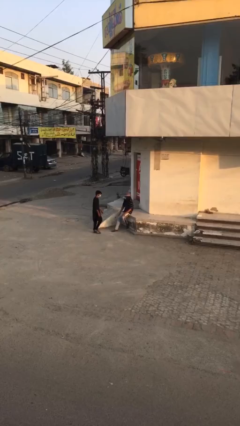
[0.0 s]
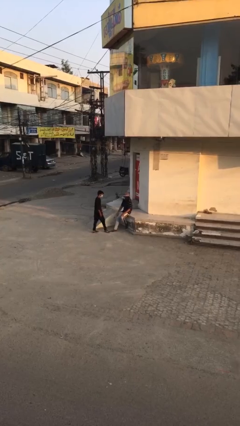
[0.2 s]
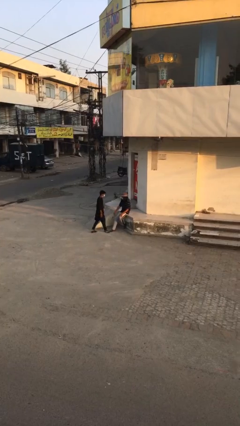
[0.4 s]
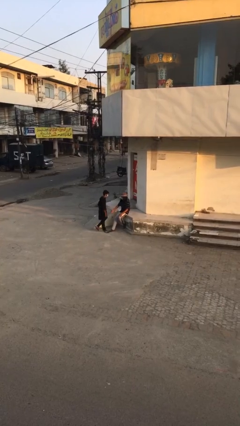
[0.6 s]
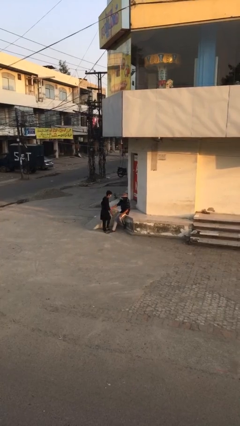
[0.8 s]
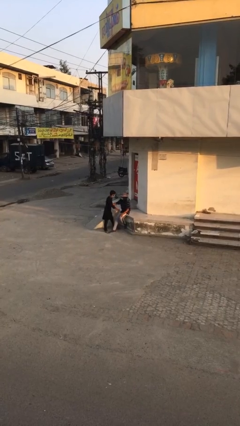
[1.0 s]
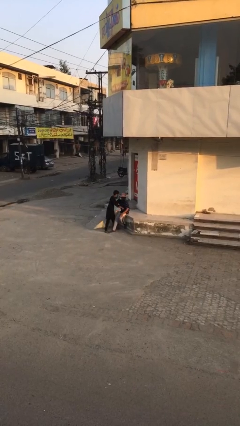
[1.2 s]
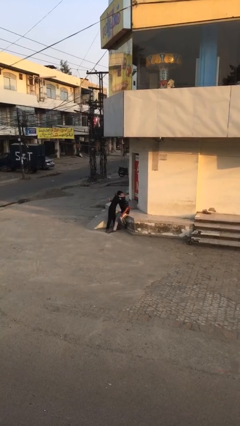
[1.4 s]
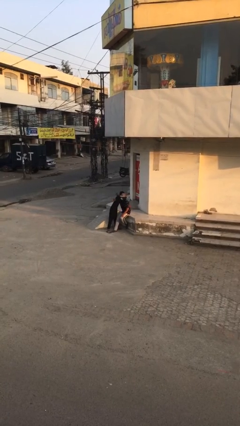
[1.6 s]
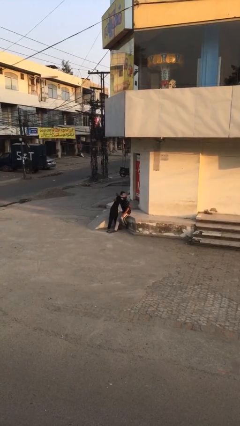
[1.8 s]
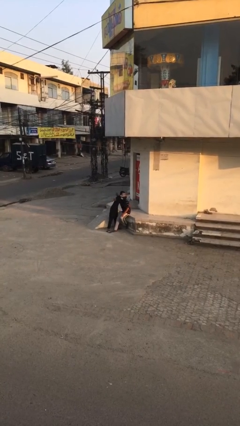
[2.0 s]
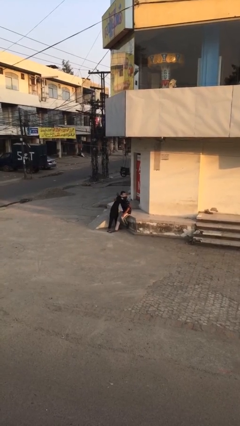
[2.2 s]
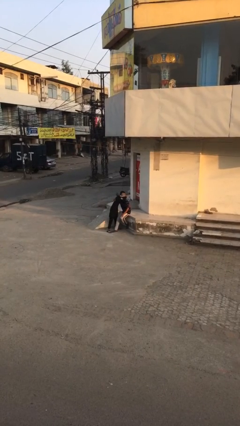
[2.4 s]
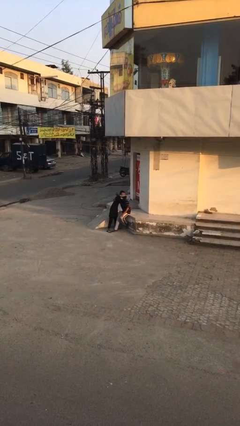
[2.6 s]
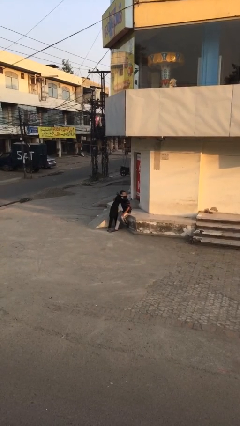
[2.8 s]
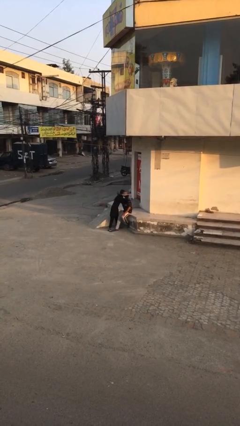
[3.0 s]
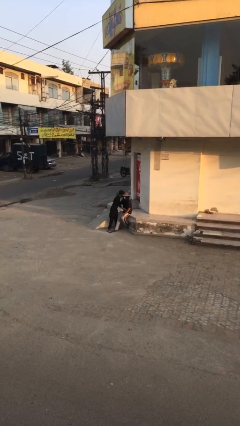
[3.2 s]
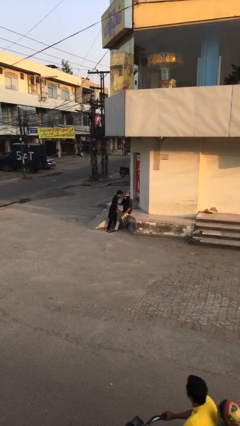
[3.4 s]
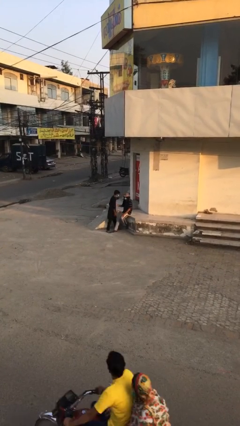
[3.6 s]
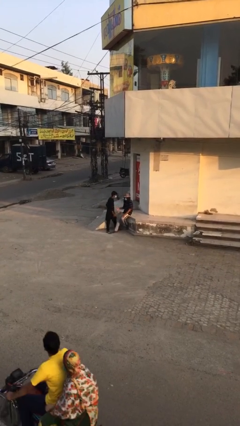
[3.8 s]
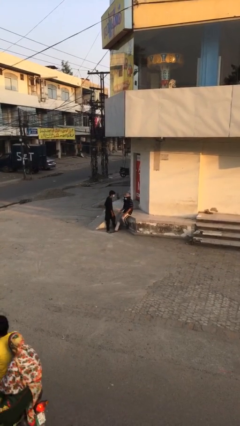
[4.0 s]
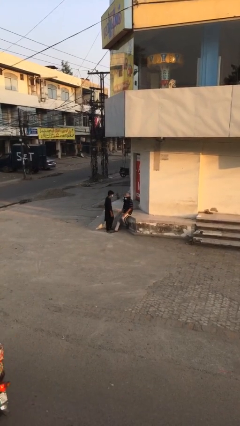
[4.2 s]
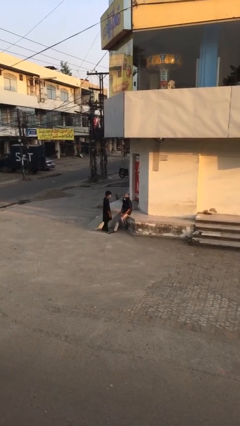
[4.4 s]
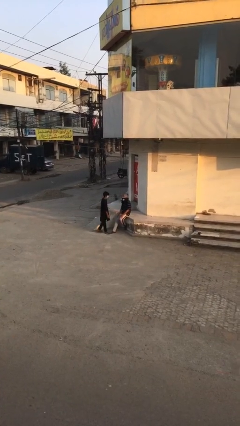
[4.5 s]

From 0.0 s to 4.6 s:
person embraces person

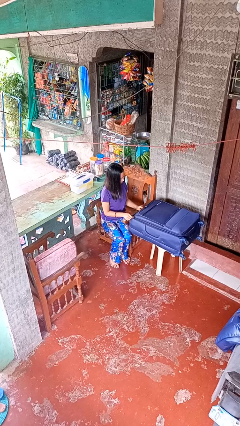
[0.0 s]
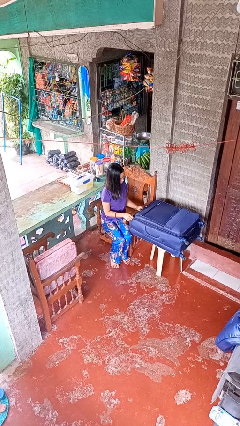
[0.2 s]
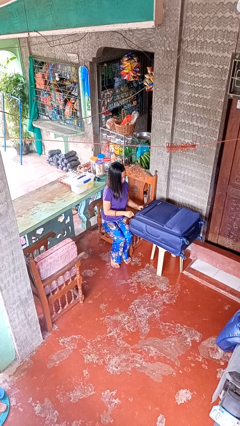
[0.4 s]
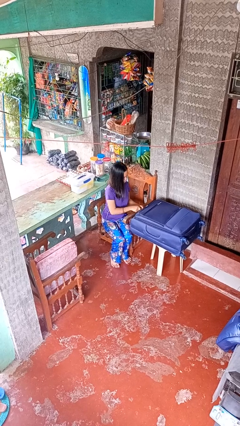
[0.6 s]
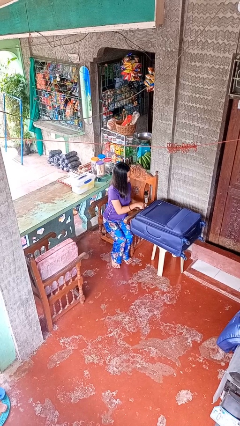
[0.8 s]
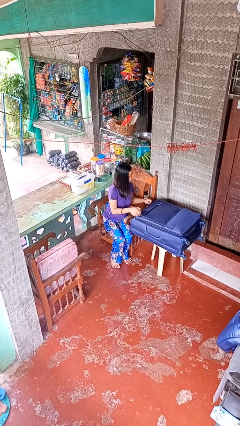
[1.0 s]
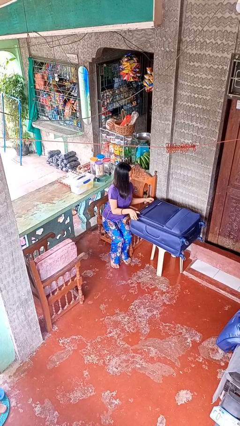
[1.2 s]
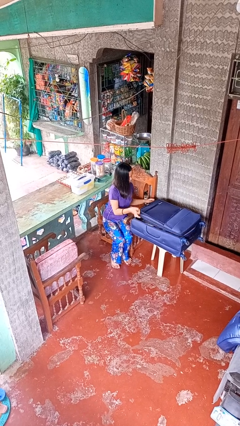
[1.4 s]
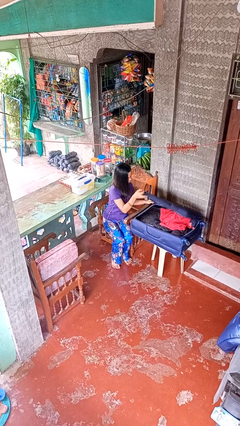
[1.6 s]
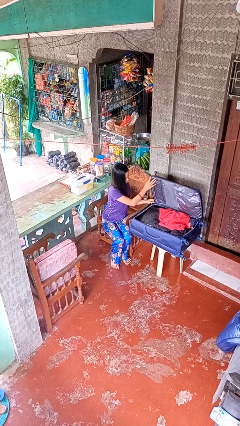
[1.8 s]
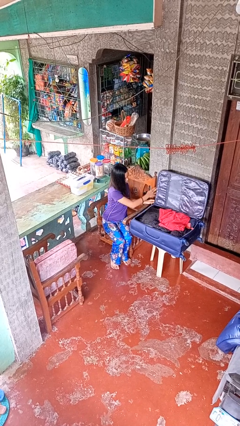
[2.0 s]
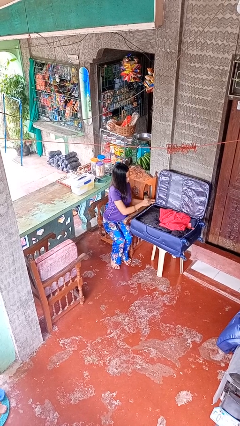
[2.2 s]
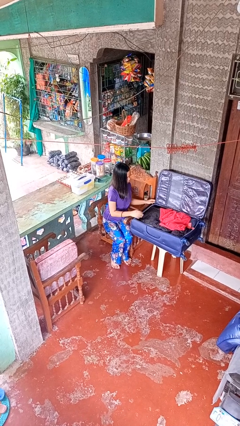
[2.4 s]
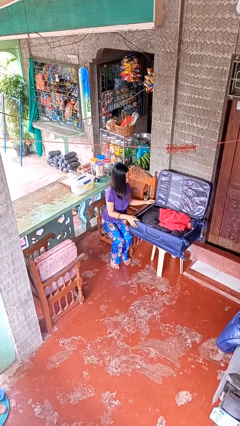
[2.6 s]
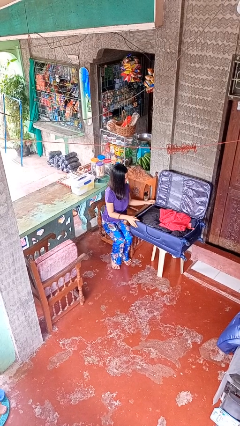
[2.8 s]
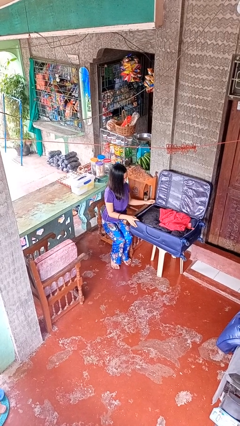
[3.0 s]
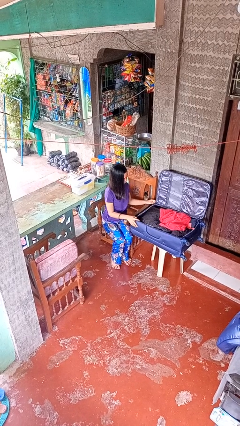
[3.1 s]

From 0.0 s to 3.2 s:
person opens suitcase

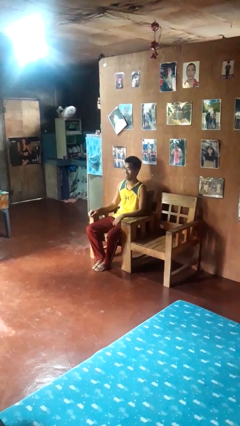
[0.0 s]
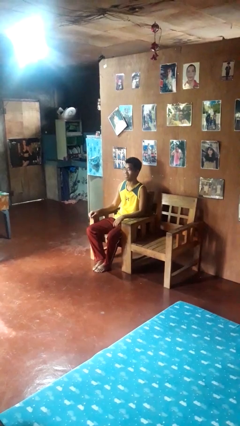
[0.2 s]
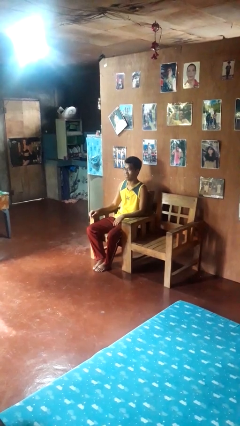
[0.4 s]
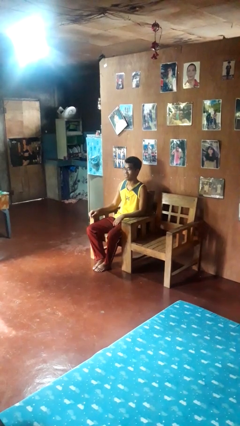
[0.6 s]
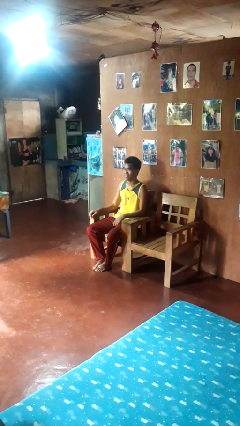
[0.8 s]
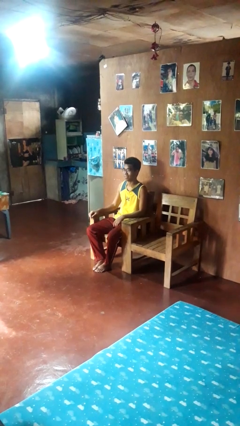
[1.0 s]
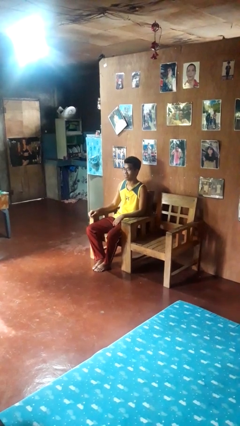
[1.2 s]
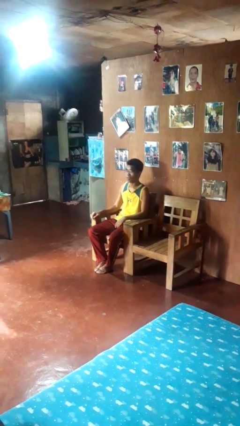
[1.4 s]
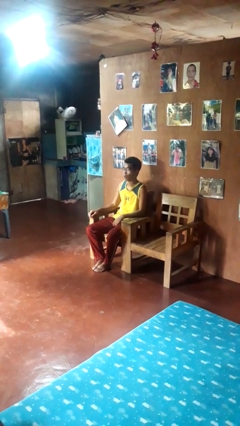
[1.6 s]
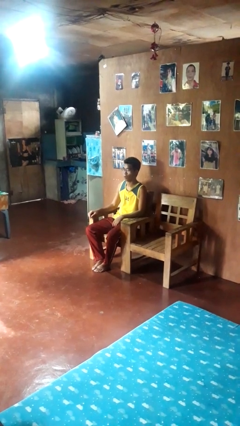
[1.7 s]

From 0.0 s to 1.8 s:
person nods head

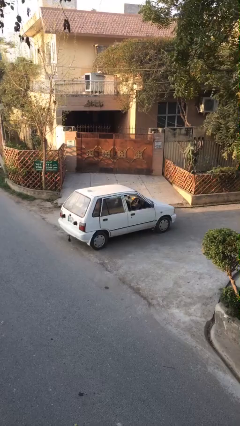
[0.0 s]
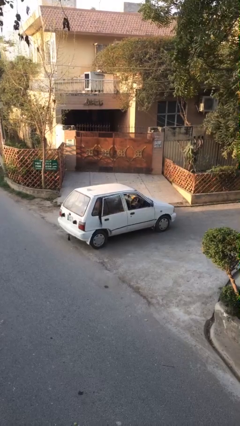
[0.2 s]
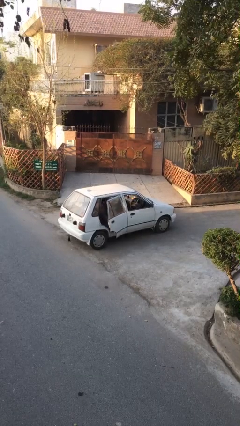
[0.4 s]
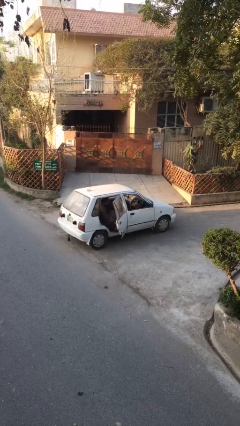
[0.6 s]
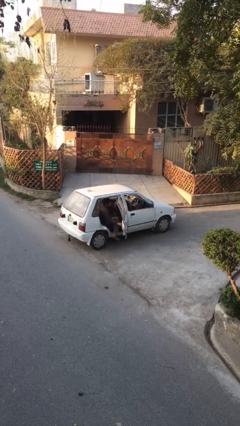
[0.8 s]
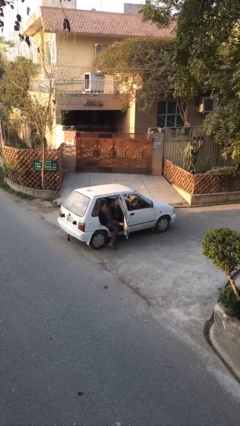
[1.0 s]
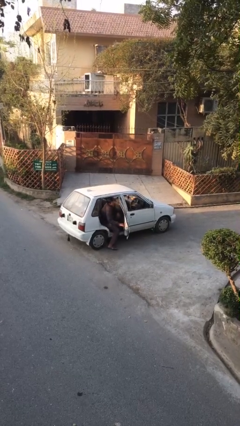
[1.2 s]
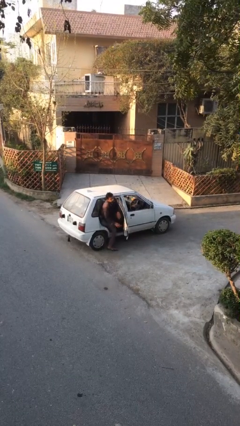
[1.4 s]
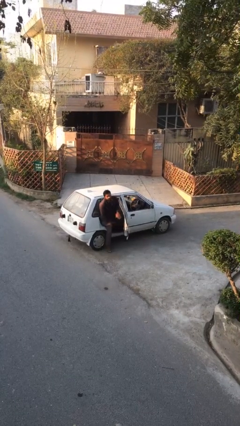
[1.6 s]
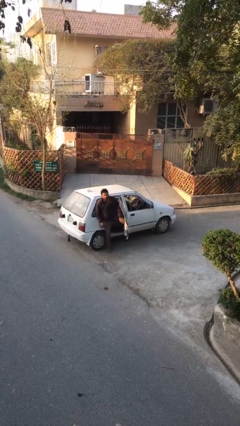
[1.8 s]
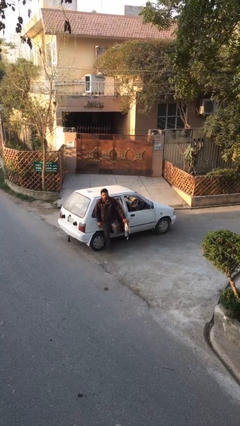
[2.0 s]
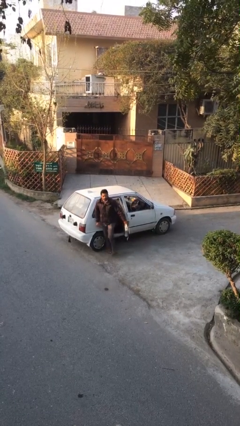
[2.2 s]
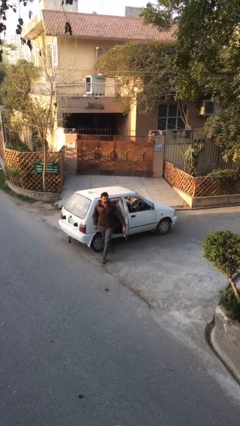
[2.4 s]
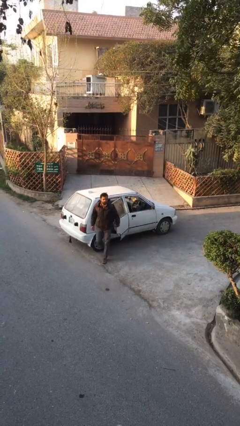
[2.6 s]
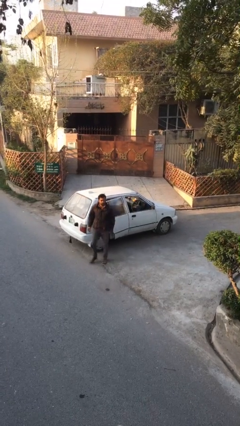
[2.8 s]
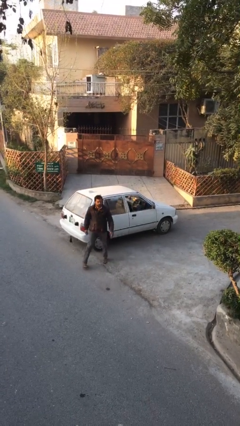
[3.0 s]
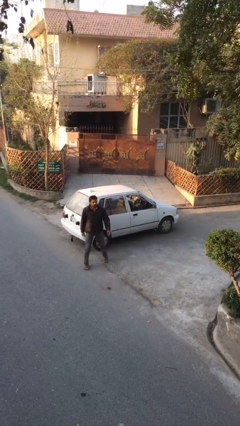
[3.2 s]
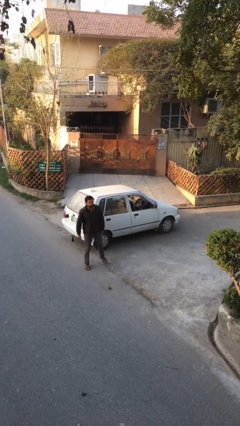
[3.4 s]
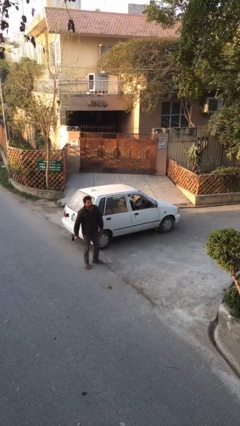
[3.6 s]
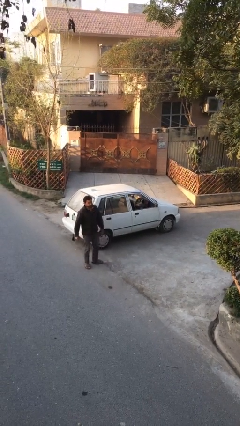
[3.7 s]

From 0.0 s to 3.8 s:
car drops off person

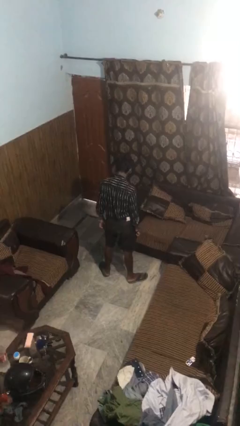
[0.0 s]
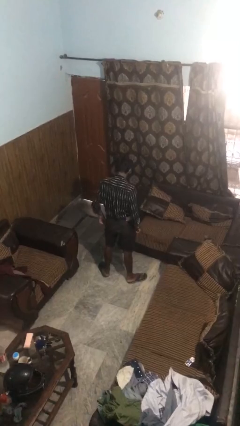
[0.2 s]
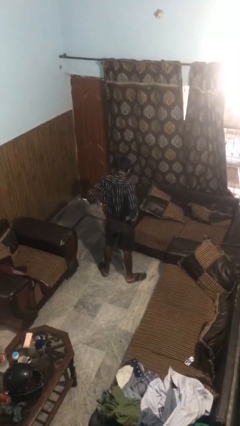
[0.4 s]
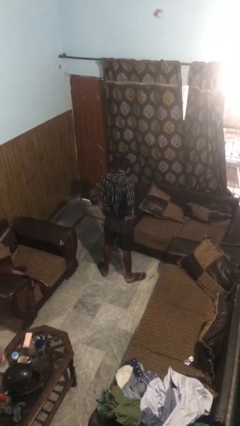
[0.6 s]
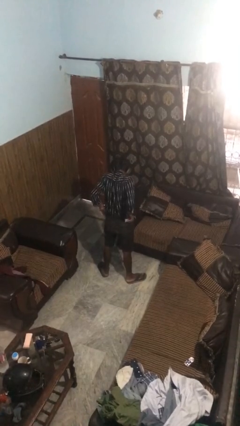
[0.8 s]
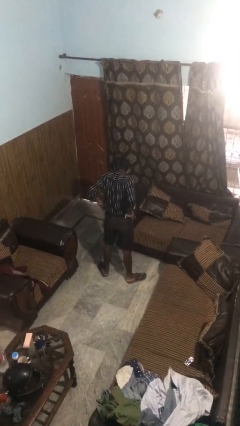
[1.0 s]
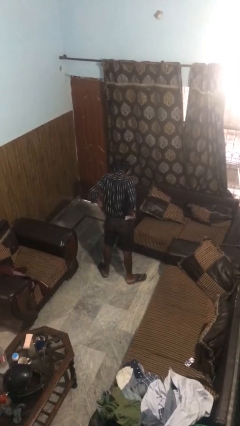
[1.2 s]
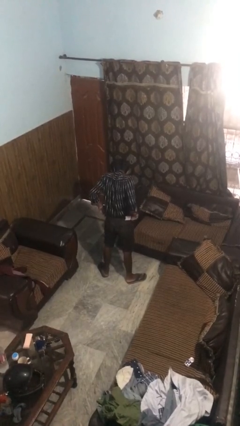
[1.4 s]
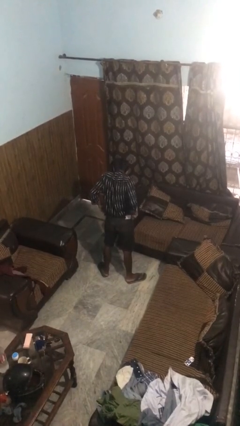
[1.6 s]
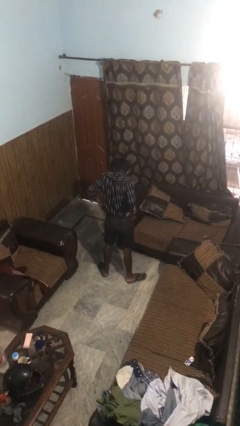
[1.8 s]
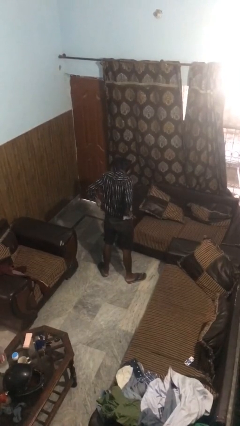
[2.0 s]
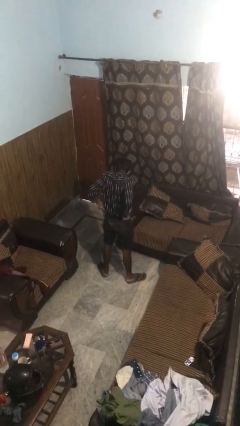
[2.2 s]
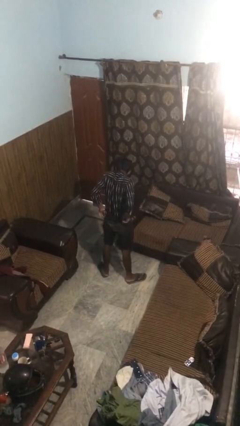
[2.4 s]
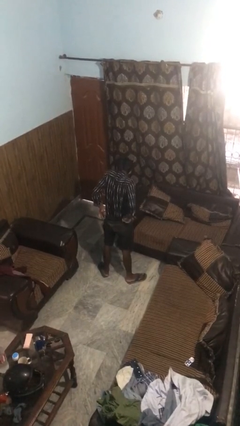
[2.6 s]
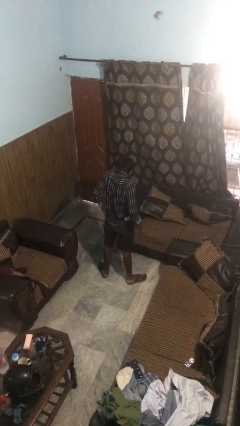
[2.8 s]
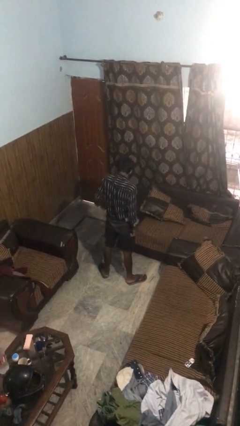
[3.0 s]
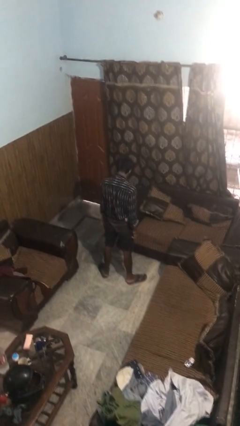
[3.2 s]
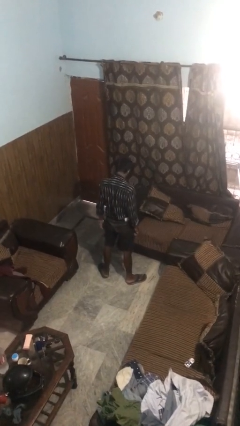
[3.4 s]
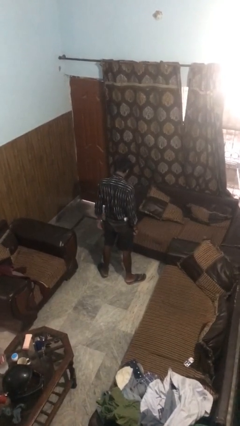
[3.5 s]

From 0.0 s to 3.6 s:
person hikes up pants

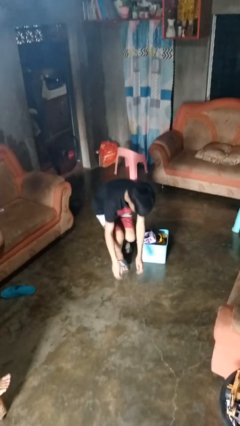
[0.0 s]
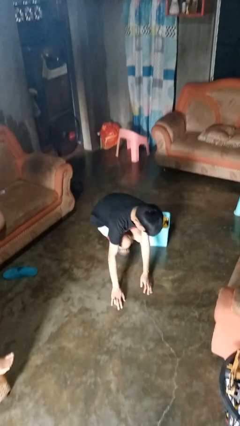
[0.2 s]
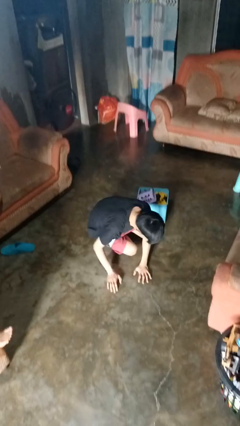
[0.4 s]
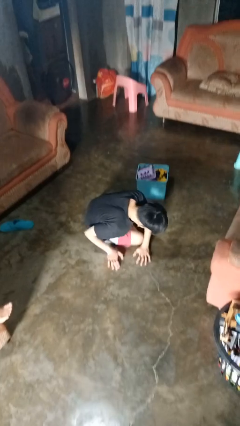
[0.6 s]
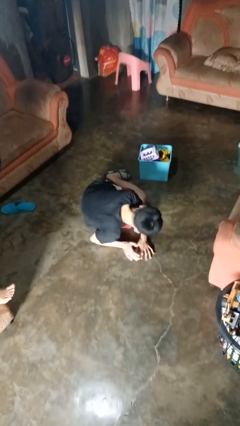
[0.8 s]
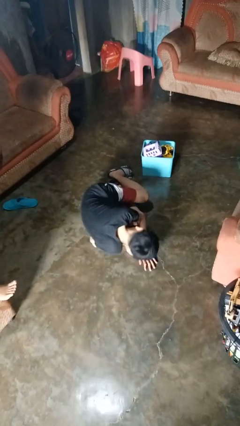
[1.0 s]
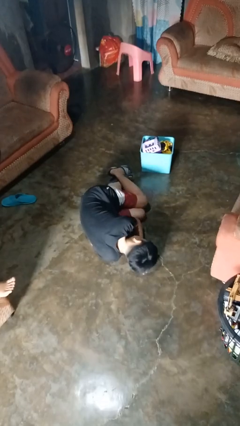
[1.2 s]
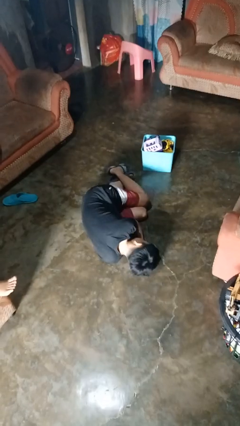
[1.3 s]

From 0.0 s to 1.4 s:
person lies down on floor
